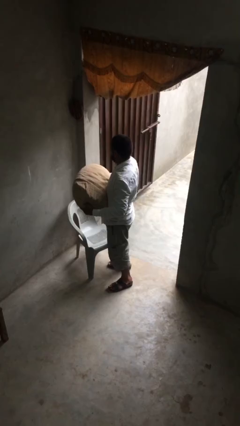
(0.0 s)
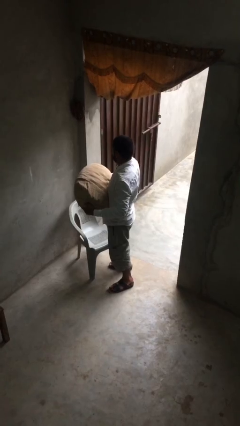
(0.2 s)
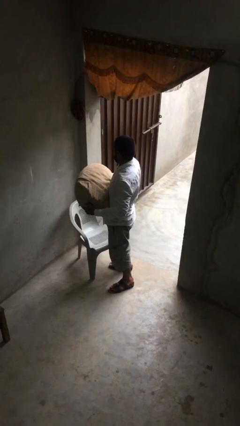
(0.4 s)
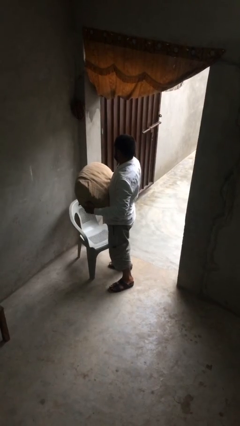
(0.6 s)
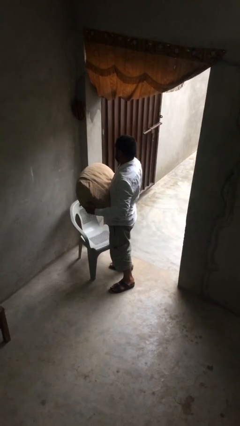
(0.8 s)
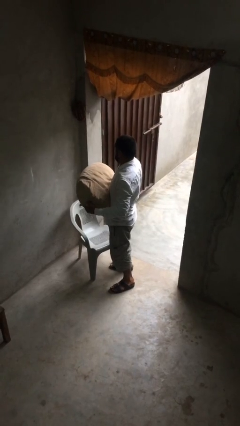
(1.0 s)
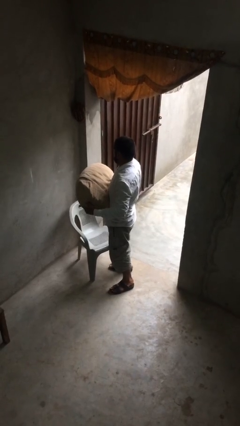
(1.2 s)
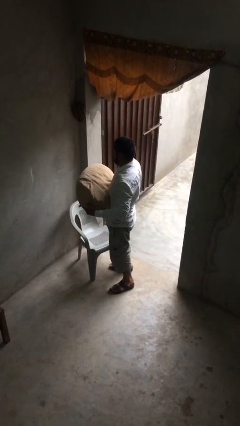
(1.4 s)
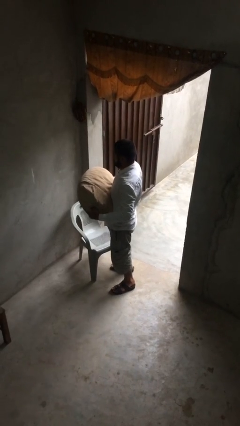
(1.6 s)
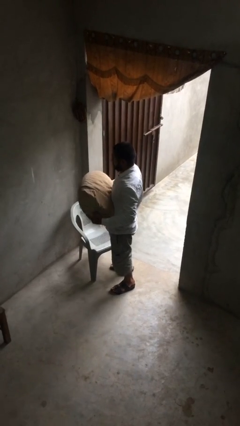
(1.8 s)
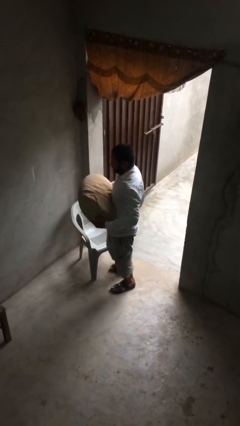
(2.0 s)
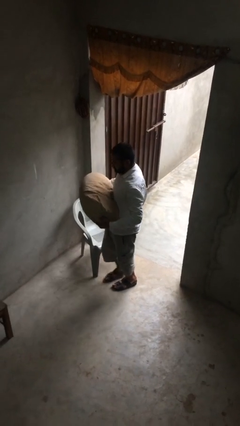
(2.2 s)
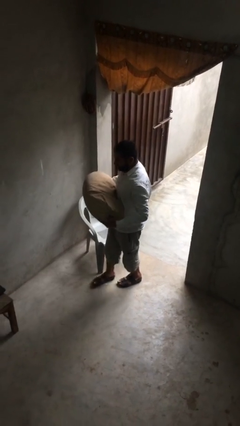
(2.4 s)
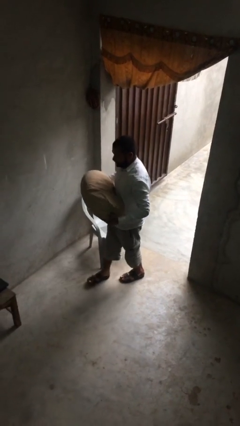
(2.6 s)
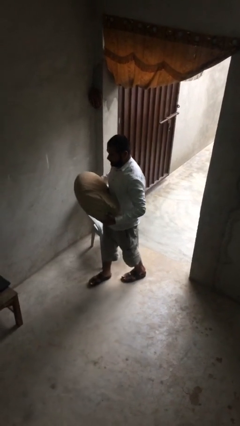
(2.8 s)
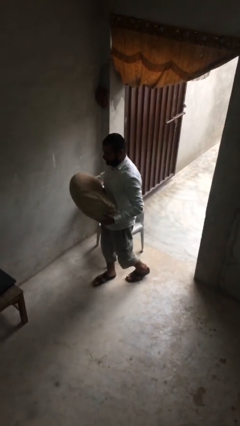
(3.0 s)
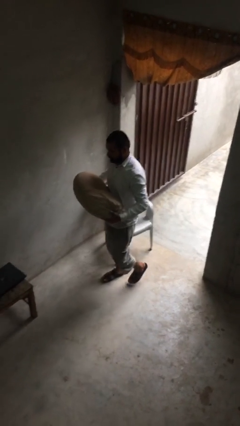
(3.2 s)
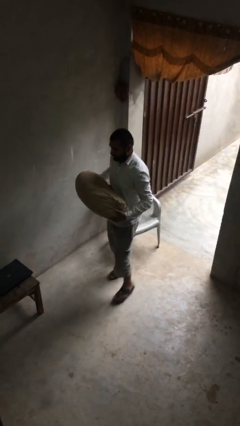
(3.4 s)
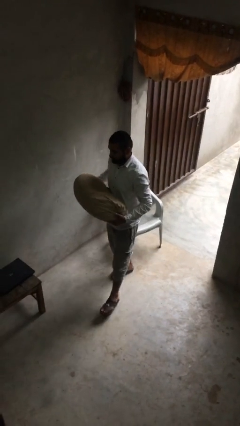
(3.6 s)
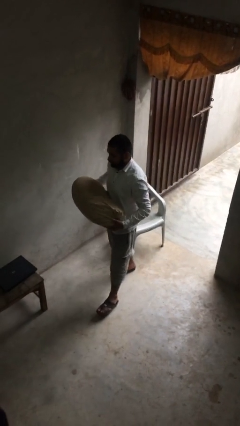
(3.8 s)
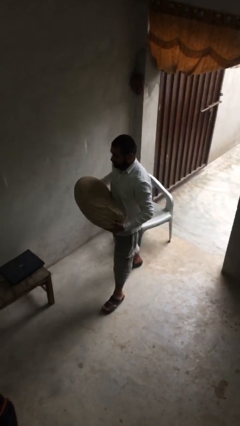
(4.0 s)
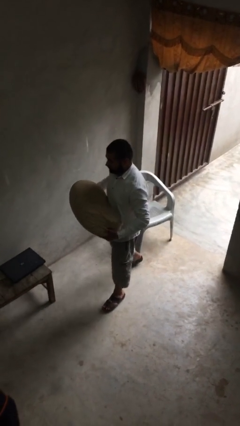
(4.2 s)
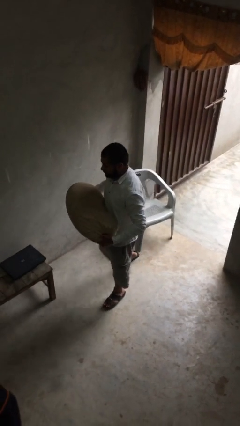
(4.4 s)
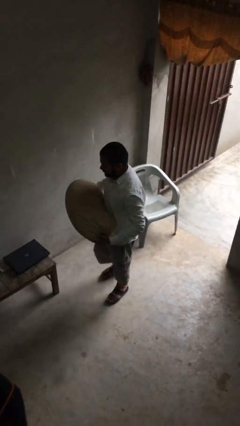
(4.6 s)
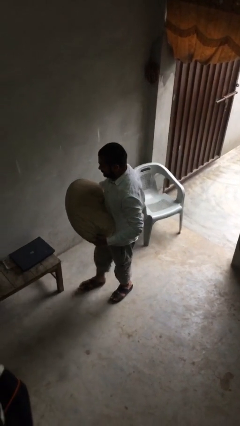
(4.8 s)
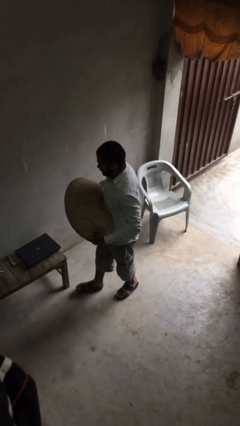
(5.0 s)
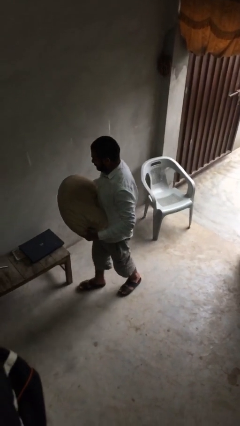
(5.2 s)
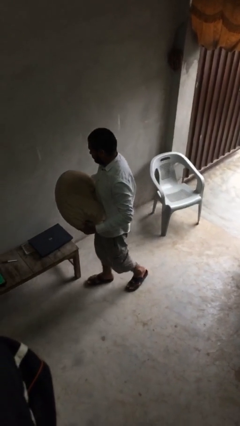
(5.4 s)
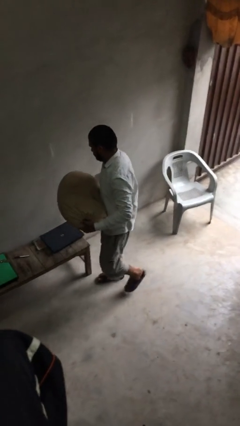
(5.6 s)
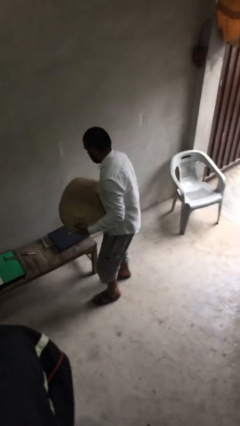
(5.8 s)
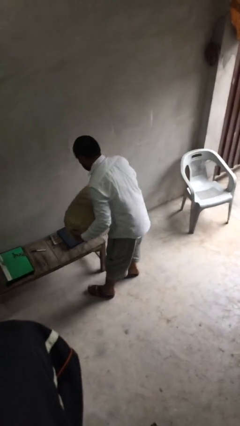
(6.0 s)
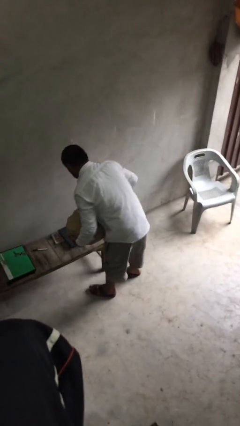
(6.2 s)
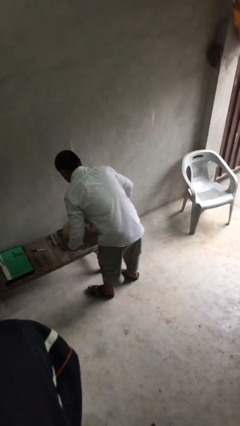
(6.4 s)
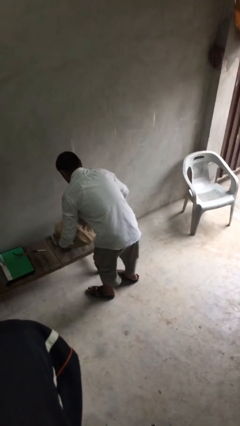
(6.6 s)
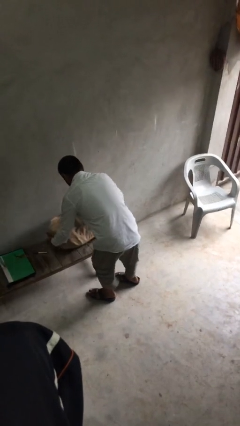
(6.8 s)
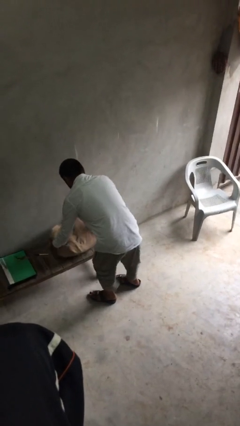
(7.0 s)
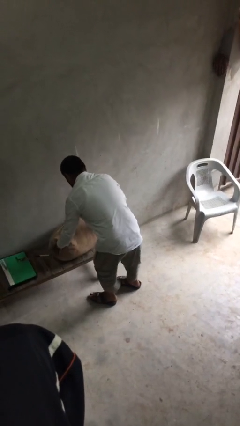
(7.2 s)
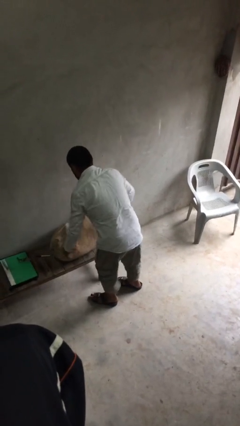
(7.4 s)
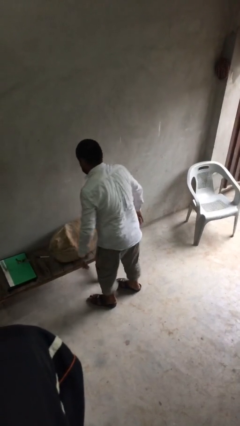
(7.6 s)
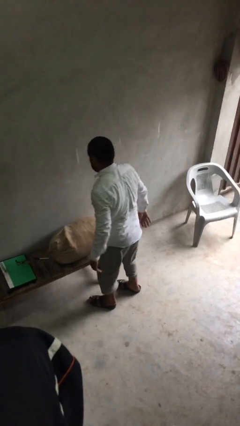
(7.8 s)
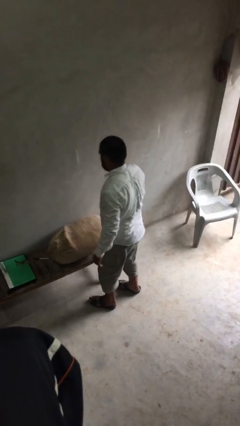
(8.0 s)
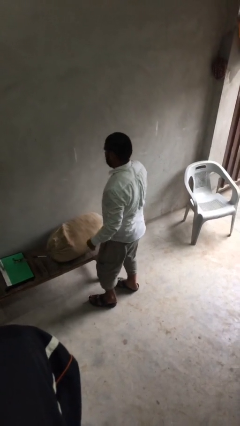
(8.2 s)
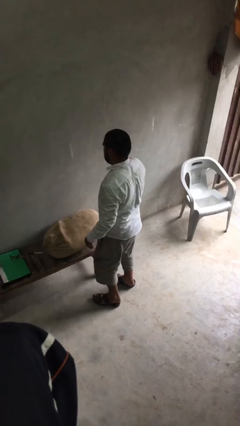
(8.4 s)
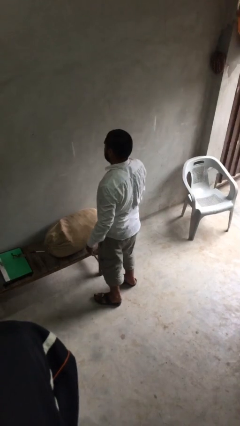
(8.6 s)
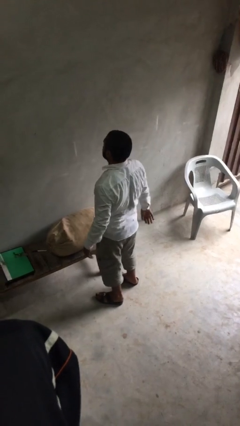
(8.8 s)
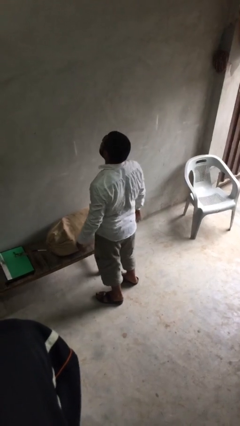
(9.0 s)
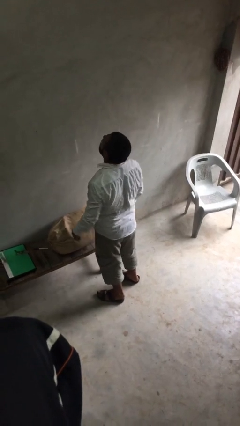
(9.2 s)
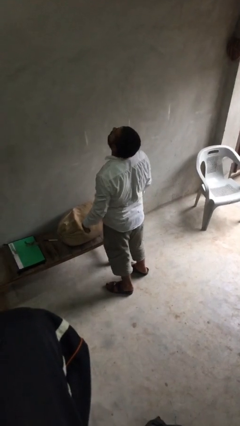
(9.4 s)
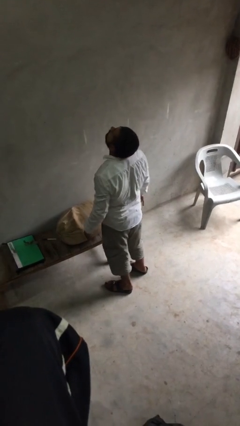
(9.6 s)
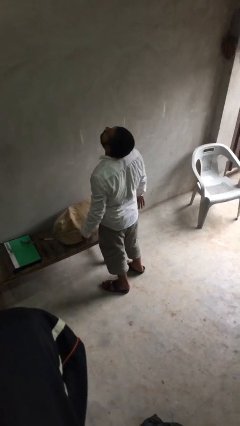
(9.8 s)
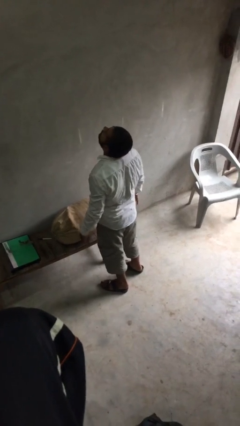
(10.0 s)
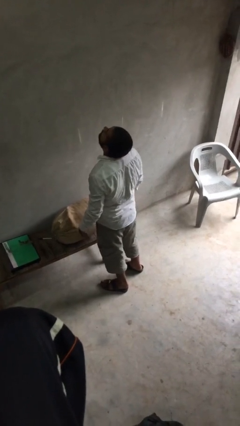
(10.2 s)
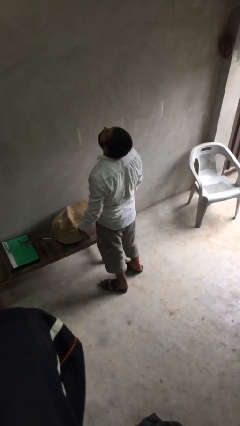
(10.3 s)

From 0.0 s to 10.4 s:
person puts down object on floor

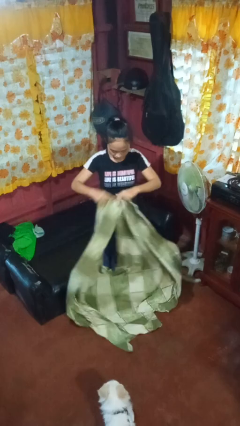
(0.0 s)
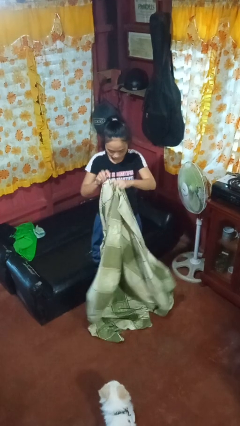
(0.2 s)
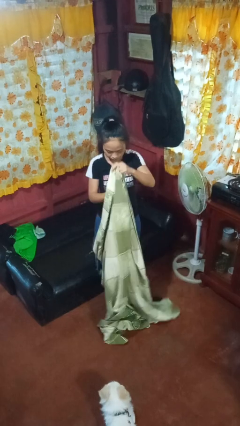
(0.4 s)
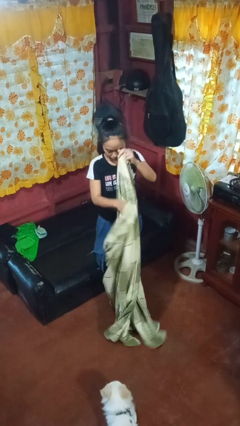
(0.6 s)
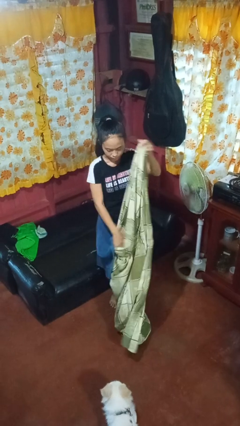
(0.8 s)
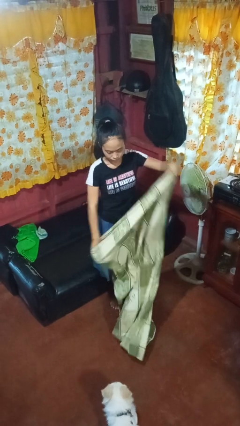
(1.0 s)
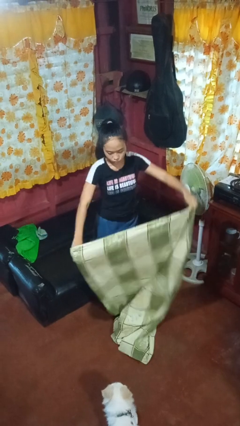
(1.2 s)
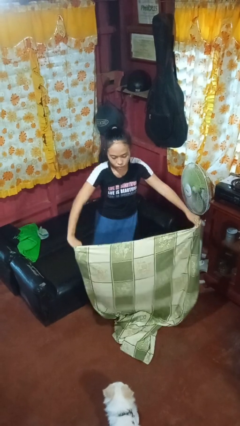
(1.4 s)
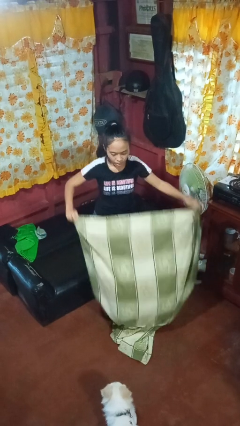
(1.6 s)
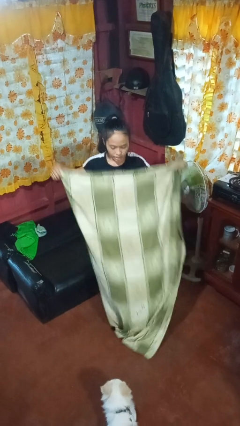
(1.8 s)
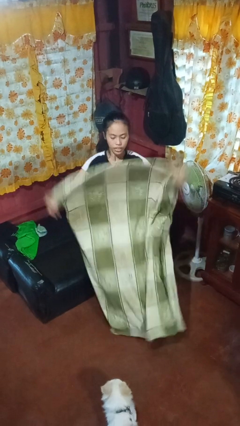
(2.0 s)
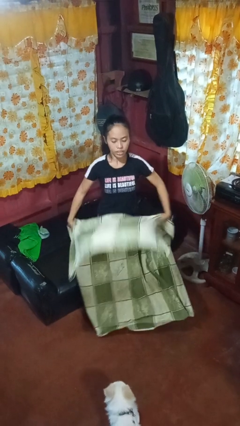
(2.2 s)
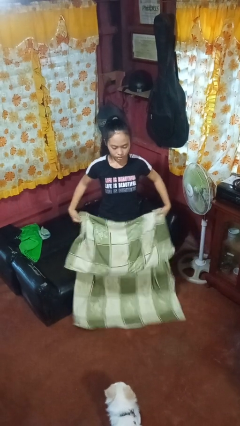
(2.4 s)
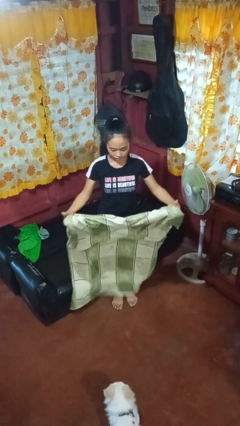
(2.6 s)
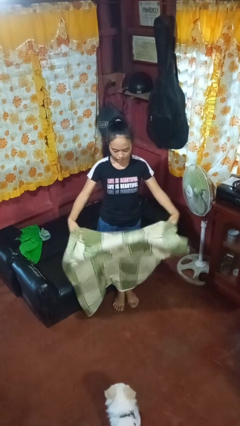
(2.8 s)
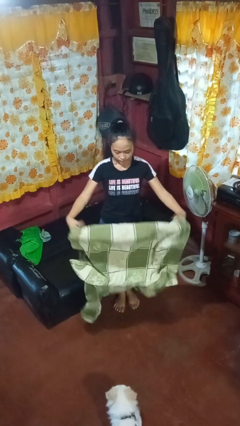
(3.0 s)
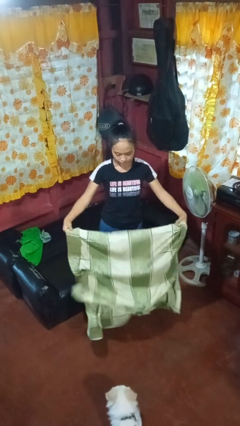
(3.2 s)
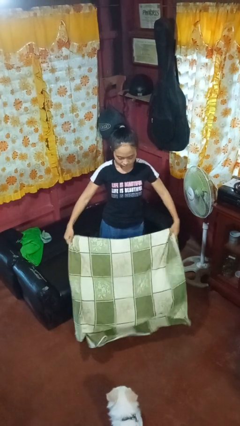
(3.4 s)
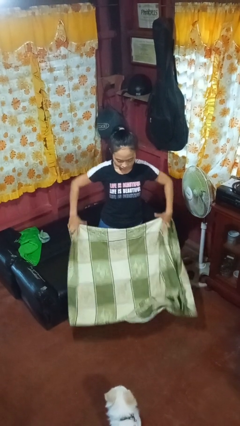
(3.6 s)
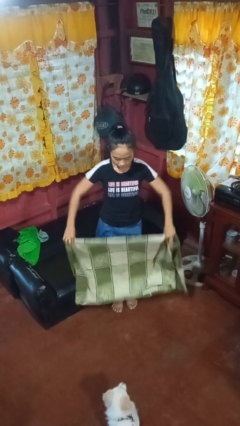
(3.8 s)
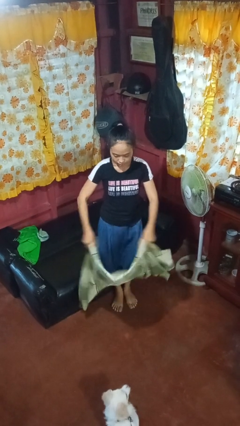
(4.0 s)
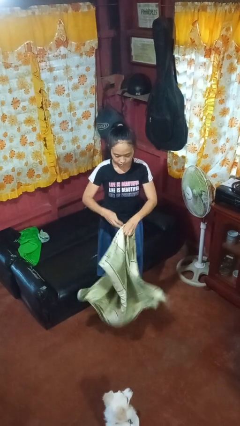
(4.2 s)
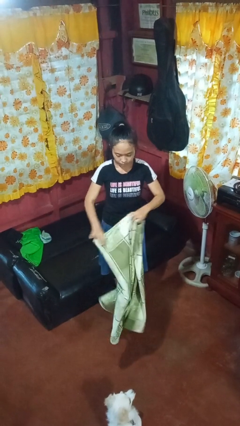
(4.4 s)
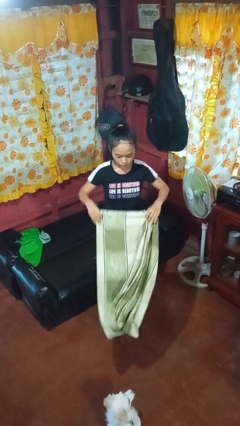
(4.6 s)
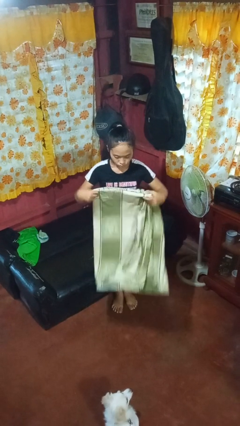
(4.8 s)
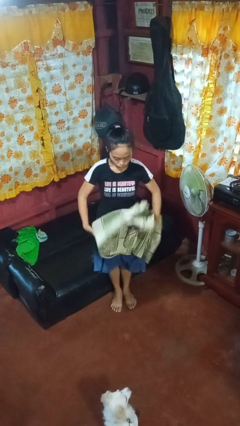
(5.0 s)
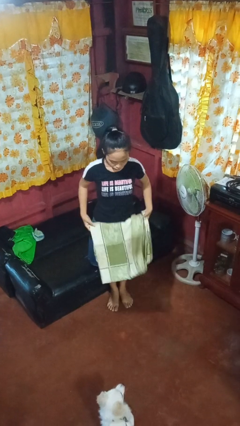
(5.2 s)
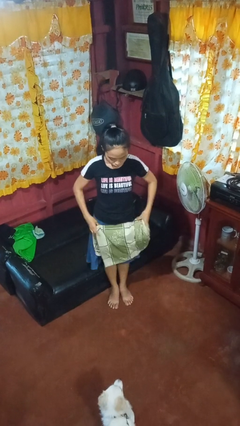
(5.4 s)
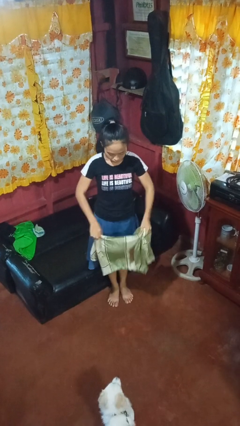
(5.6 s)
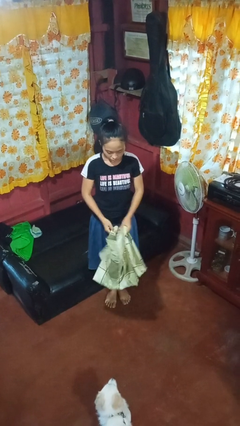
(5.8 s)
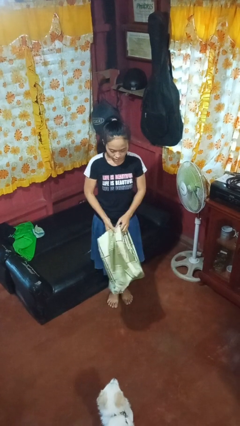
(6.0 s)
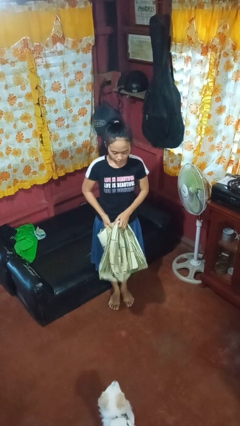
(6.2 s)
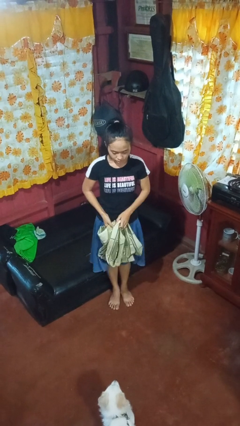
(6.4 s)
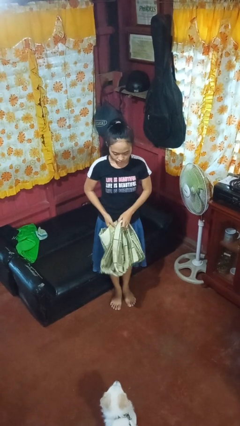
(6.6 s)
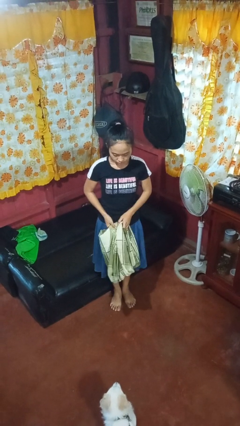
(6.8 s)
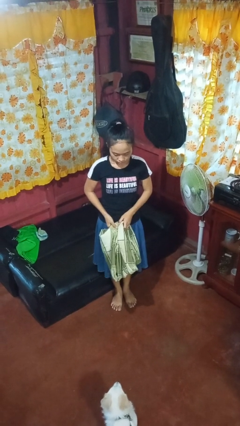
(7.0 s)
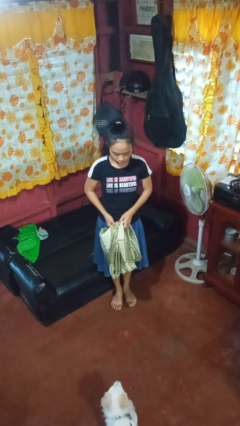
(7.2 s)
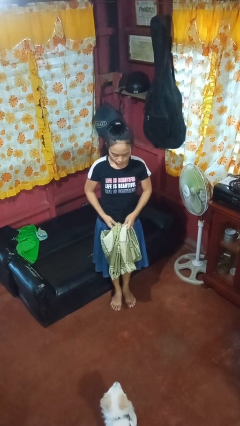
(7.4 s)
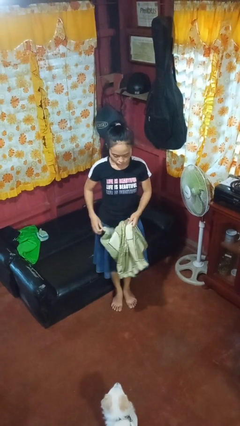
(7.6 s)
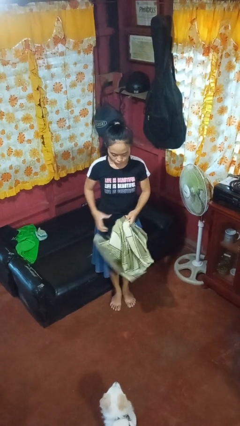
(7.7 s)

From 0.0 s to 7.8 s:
person folds blanket

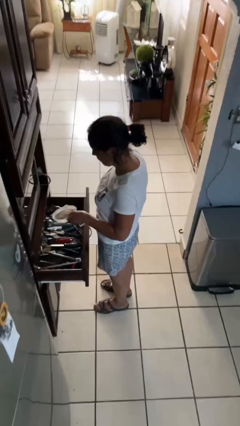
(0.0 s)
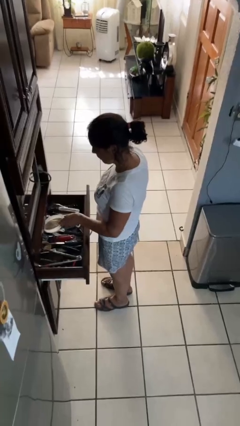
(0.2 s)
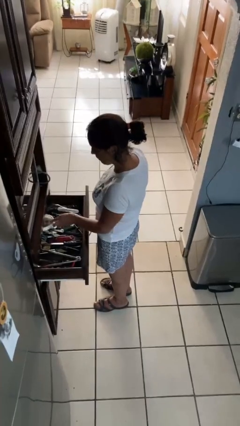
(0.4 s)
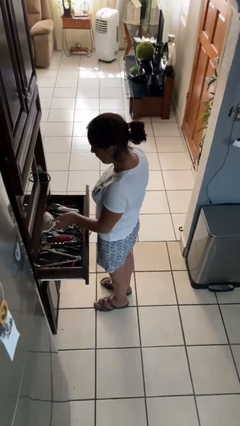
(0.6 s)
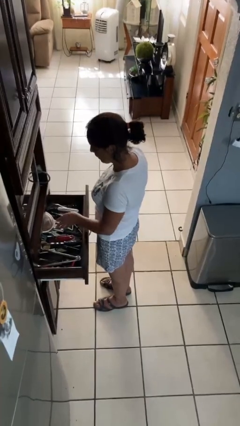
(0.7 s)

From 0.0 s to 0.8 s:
person puts object into kitchen drawer
